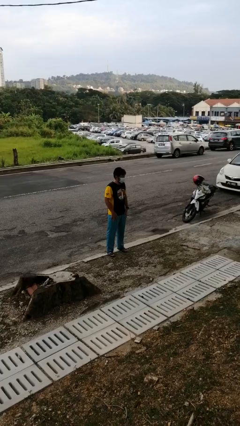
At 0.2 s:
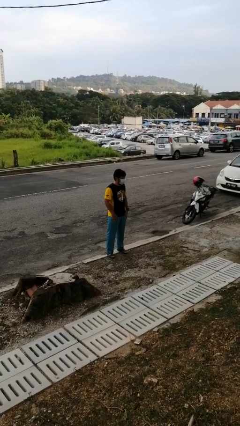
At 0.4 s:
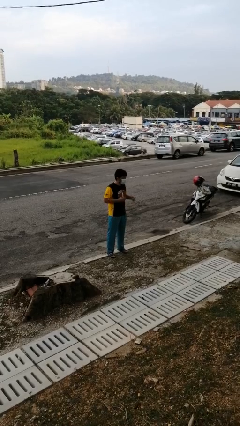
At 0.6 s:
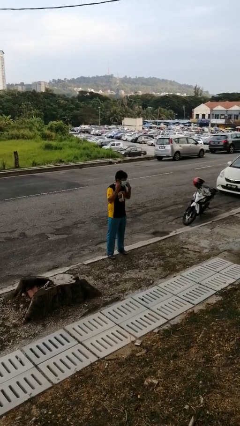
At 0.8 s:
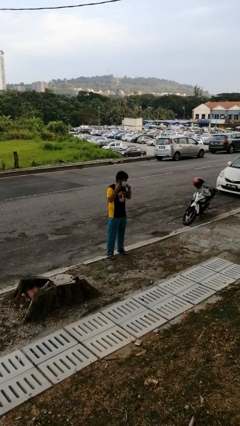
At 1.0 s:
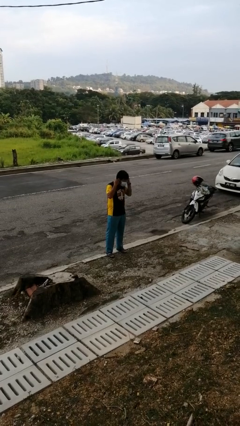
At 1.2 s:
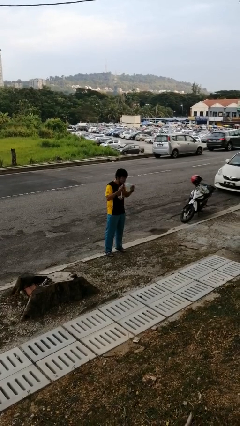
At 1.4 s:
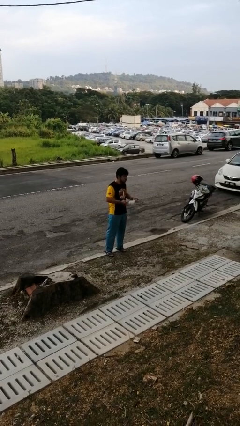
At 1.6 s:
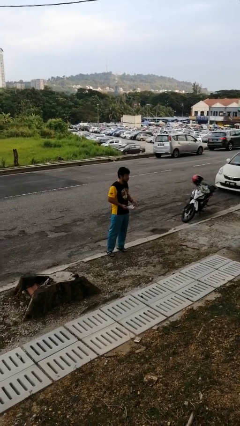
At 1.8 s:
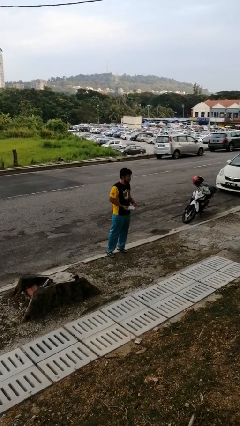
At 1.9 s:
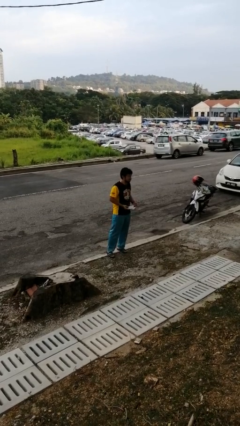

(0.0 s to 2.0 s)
person takes off facemask

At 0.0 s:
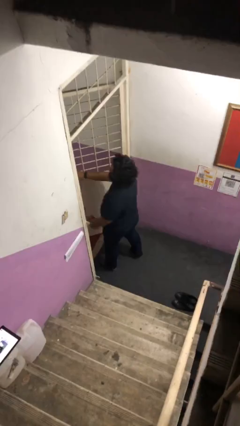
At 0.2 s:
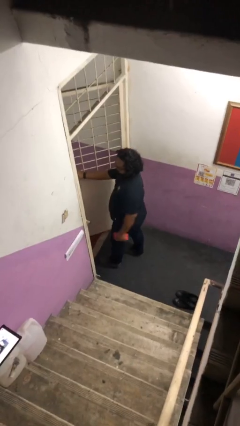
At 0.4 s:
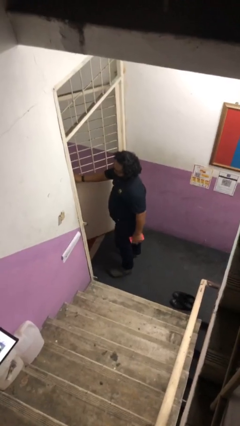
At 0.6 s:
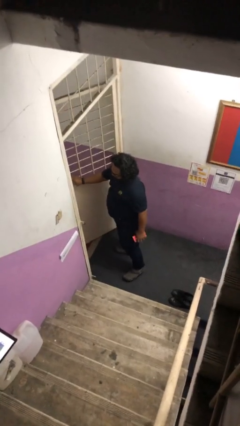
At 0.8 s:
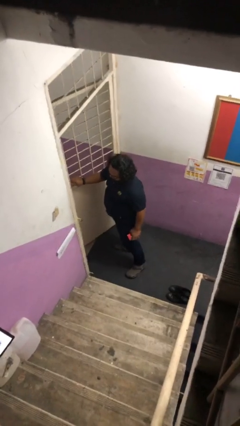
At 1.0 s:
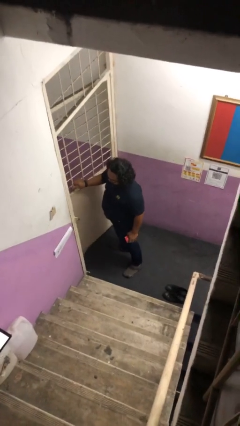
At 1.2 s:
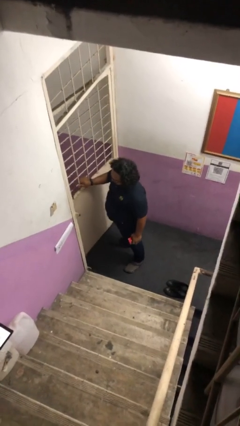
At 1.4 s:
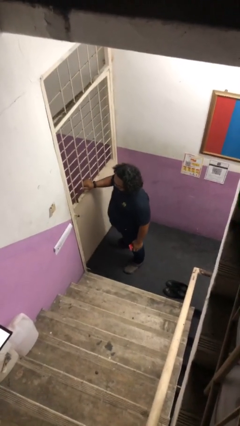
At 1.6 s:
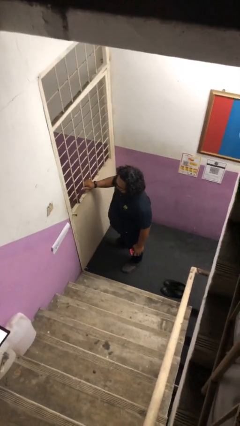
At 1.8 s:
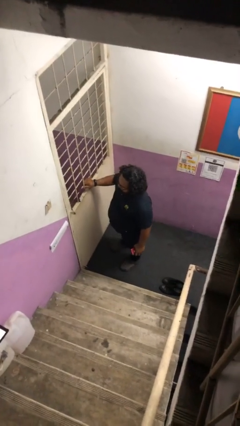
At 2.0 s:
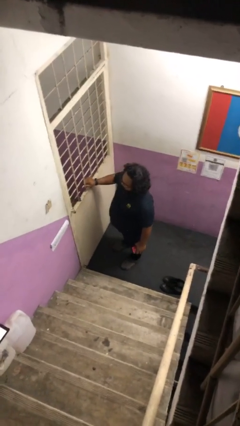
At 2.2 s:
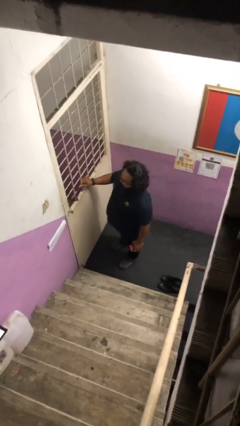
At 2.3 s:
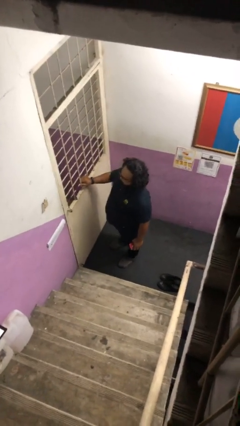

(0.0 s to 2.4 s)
person closes facility door

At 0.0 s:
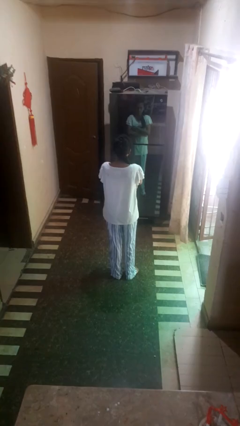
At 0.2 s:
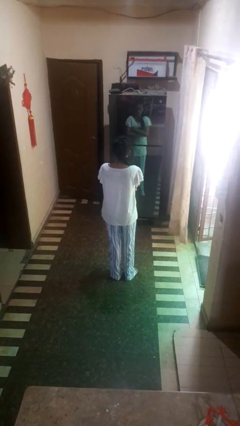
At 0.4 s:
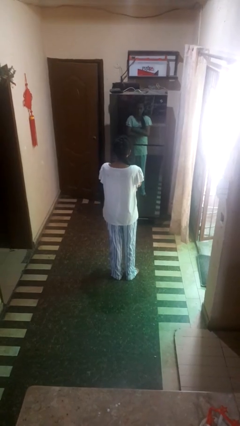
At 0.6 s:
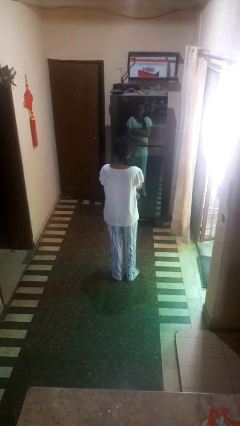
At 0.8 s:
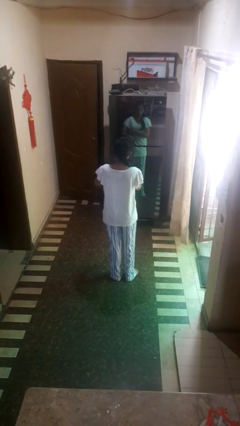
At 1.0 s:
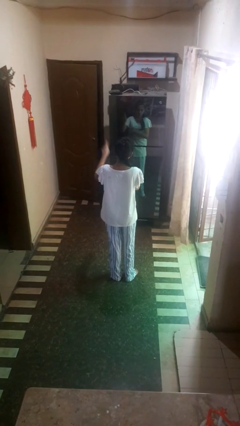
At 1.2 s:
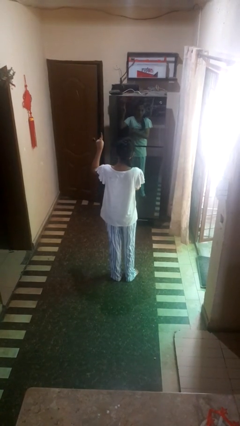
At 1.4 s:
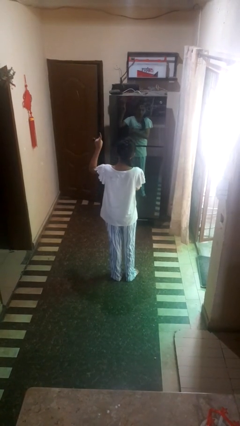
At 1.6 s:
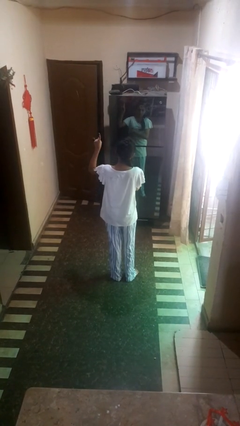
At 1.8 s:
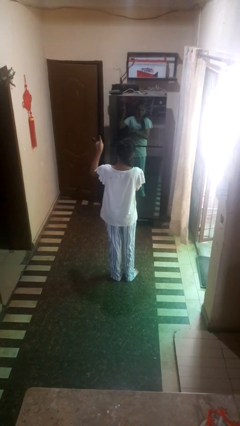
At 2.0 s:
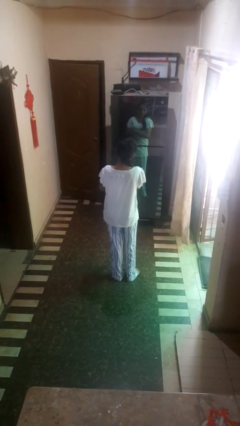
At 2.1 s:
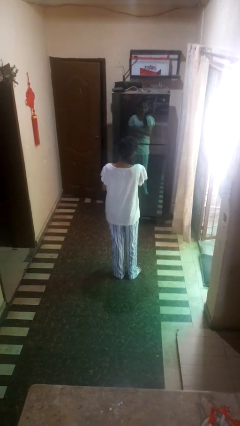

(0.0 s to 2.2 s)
person gestures number one

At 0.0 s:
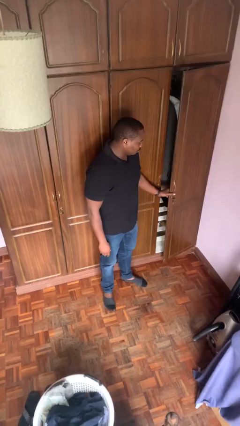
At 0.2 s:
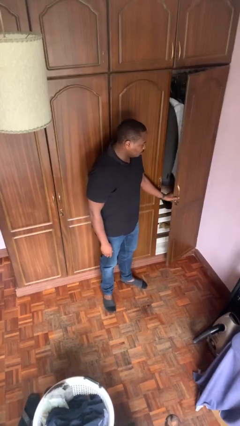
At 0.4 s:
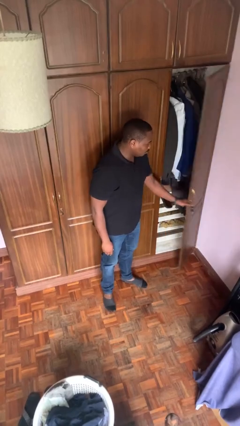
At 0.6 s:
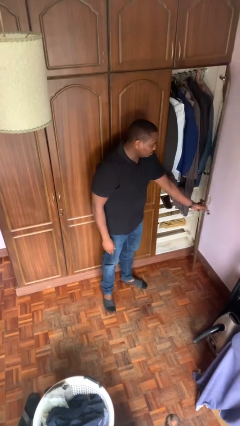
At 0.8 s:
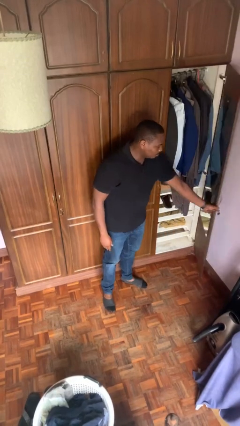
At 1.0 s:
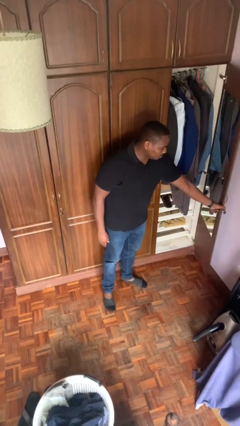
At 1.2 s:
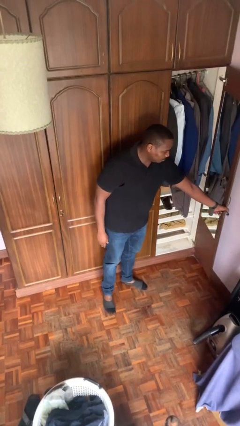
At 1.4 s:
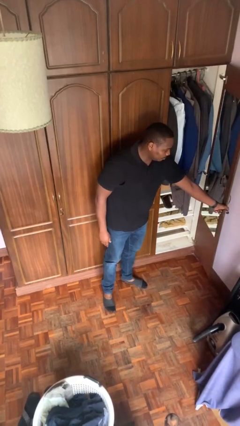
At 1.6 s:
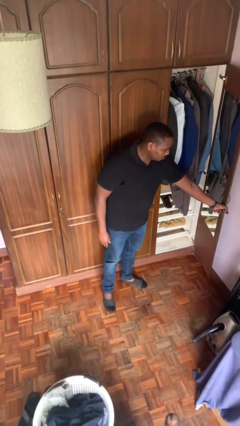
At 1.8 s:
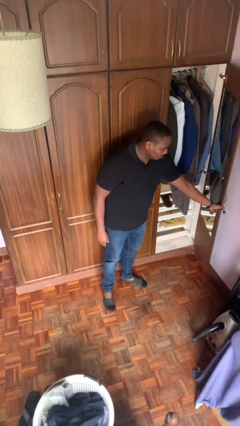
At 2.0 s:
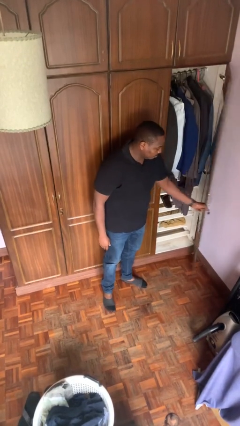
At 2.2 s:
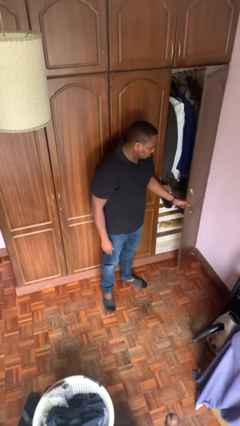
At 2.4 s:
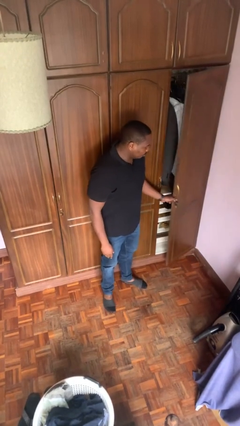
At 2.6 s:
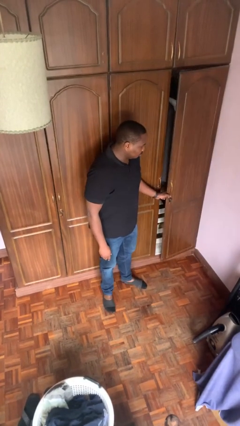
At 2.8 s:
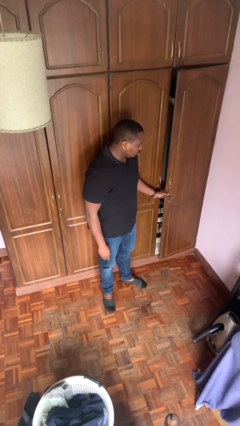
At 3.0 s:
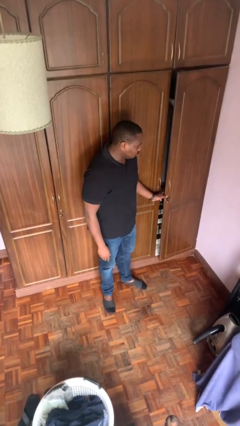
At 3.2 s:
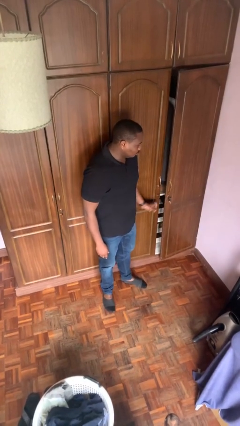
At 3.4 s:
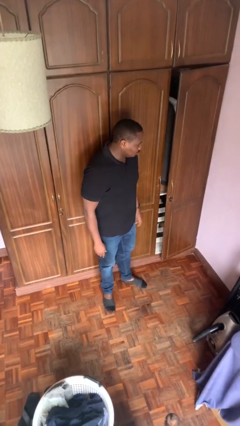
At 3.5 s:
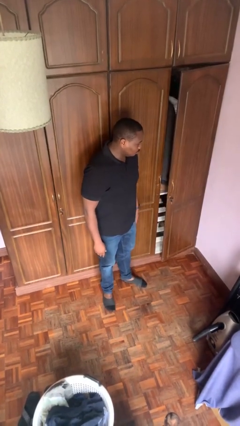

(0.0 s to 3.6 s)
person opens closet door

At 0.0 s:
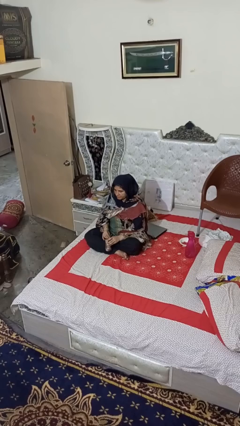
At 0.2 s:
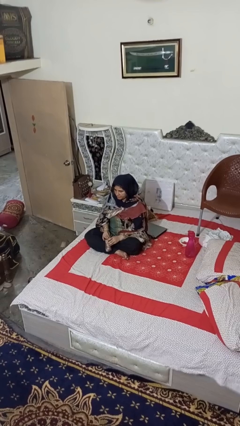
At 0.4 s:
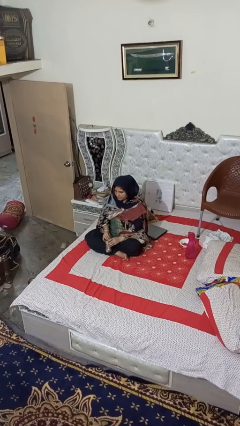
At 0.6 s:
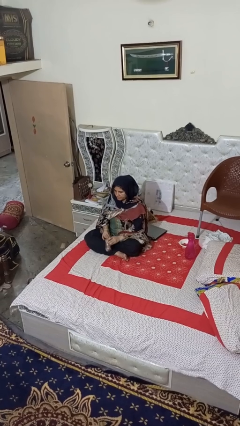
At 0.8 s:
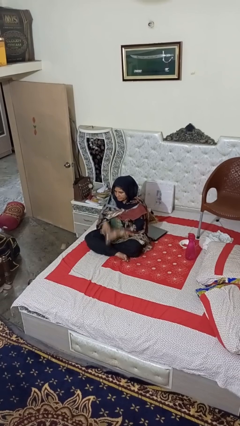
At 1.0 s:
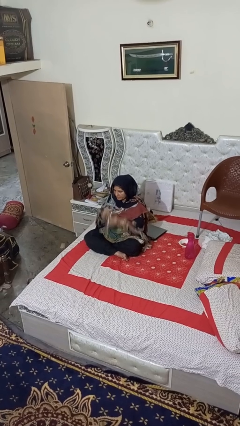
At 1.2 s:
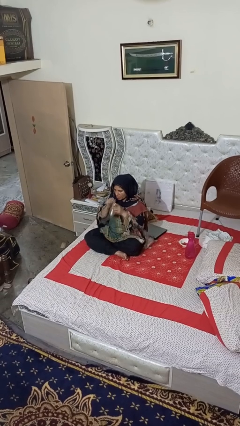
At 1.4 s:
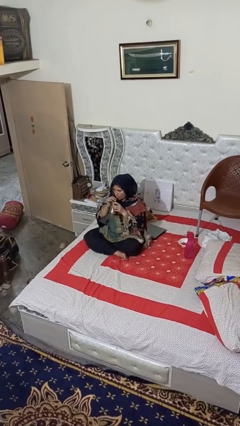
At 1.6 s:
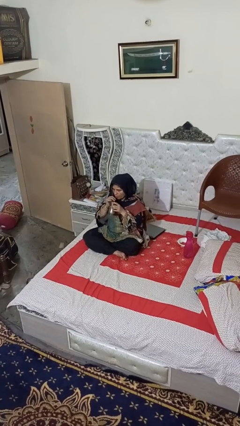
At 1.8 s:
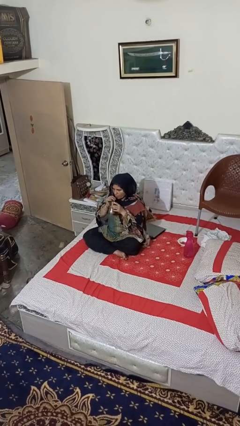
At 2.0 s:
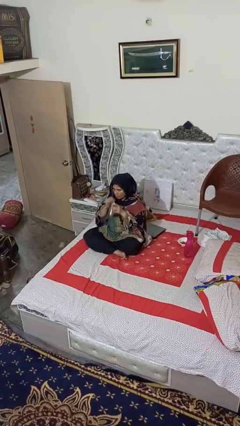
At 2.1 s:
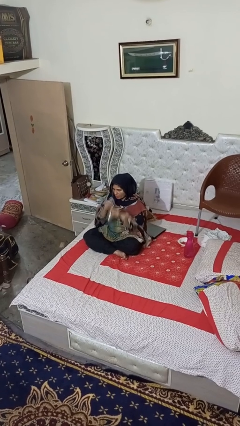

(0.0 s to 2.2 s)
person drinks from straw

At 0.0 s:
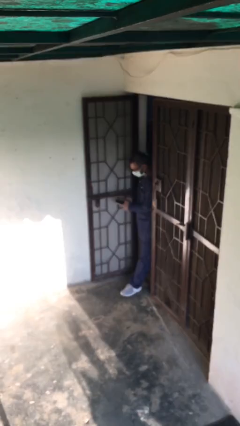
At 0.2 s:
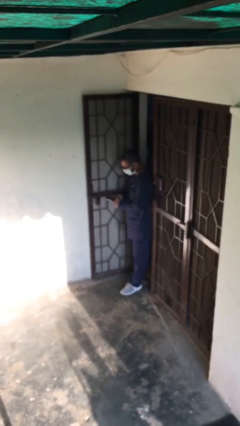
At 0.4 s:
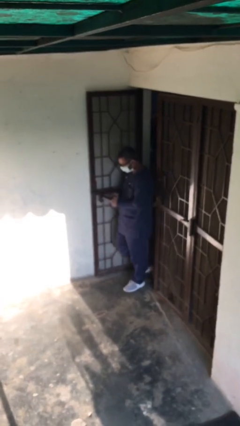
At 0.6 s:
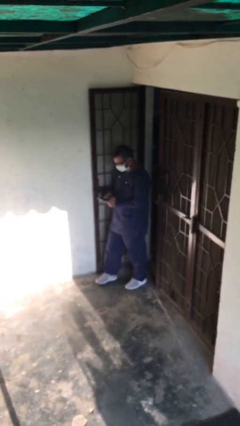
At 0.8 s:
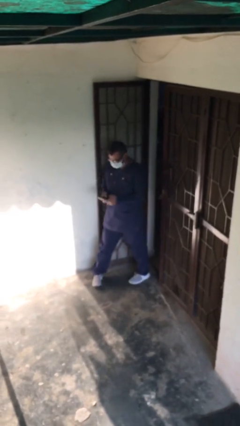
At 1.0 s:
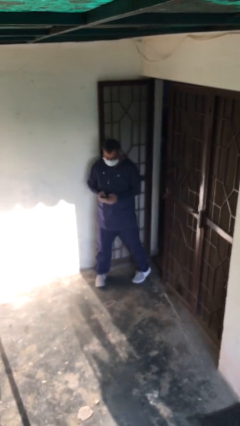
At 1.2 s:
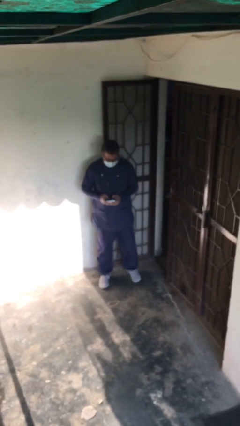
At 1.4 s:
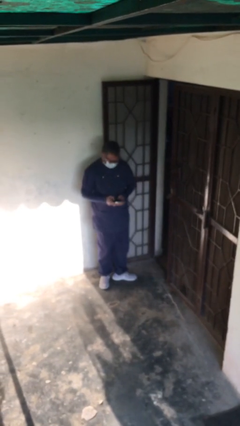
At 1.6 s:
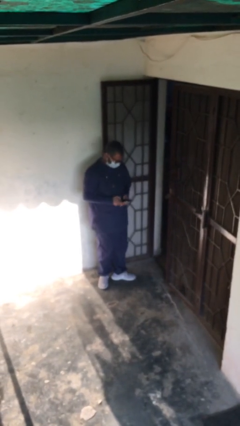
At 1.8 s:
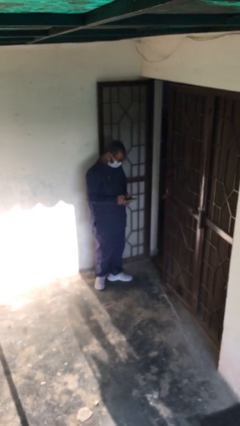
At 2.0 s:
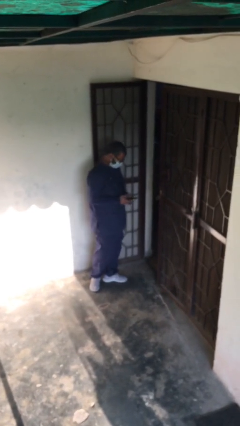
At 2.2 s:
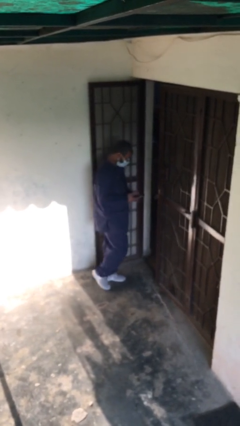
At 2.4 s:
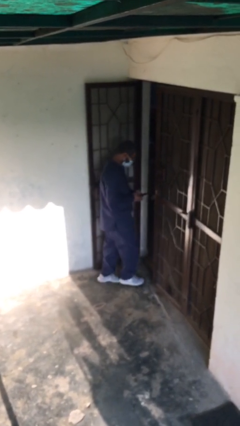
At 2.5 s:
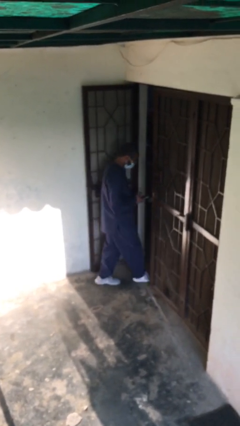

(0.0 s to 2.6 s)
person enters scene through structure

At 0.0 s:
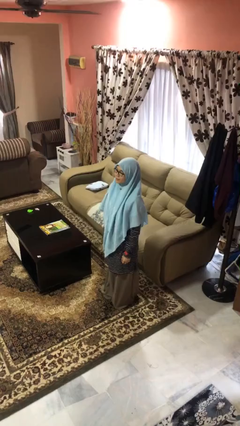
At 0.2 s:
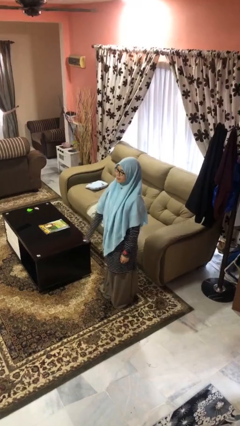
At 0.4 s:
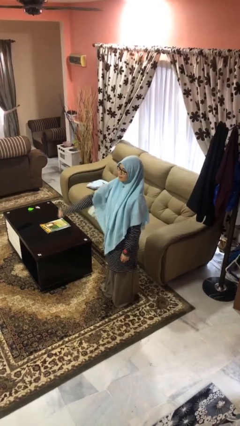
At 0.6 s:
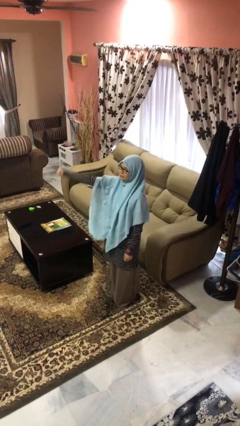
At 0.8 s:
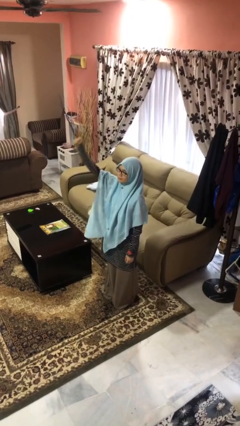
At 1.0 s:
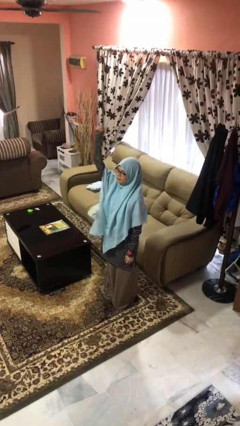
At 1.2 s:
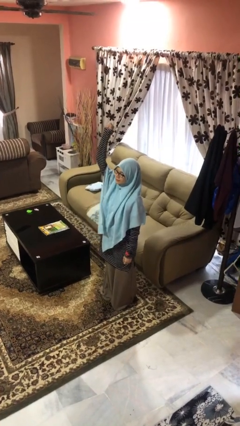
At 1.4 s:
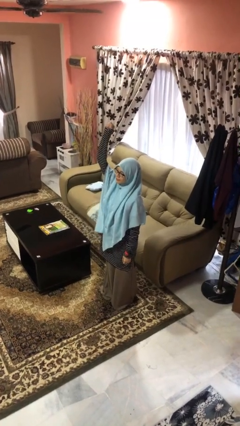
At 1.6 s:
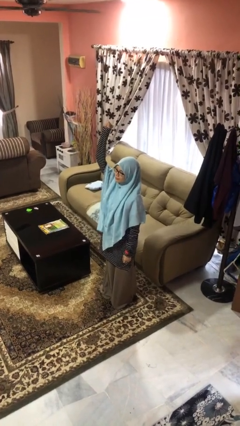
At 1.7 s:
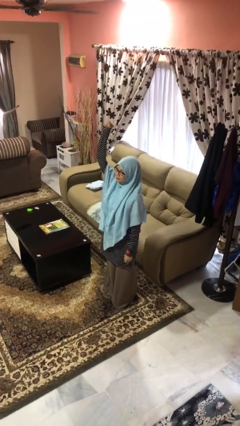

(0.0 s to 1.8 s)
person gestures raise hand

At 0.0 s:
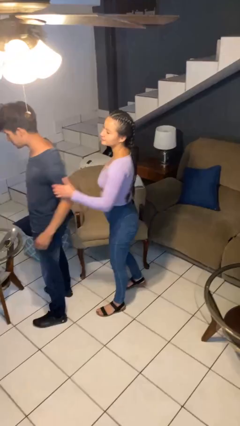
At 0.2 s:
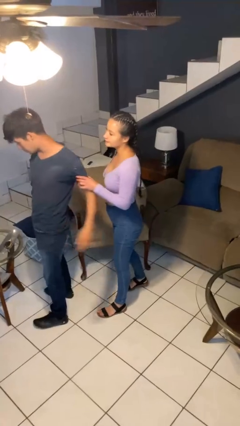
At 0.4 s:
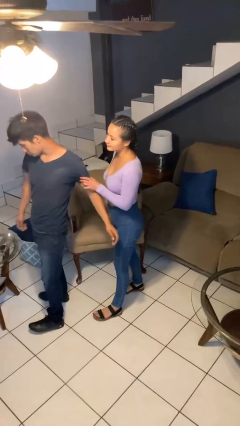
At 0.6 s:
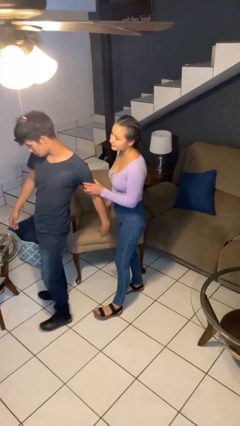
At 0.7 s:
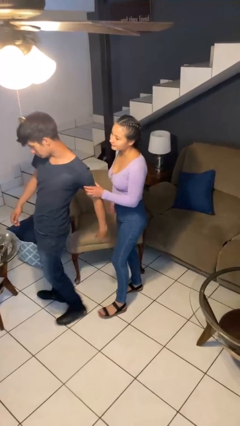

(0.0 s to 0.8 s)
person grabs person by bicep
